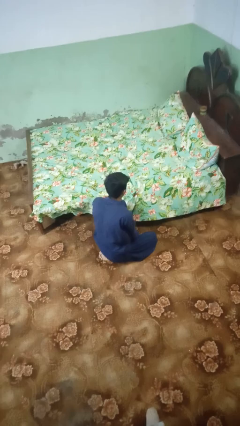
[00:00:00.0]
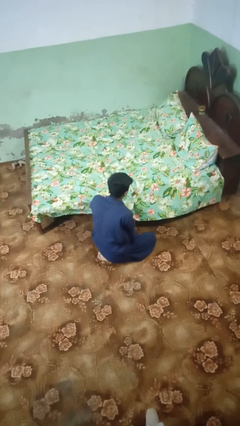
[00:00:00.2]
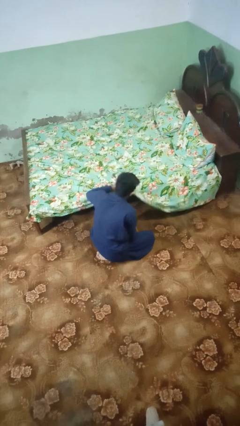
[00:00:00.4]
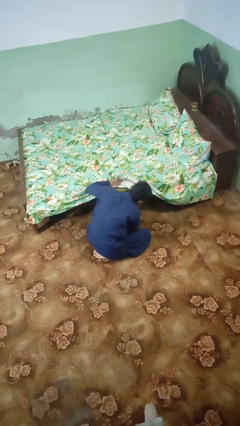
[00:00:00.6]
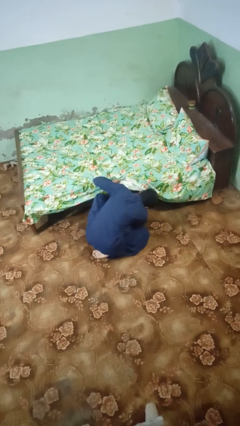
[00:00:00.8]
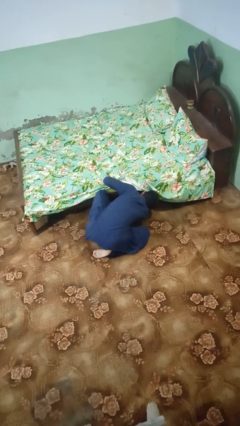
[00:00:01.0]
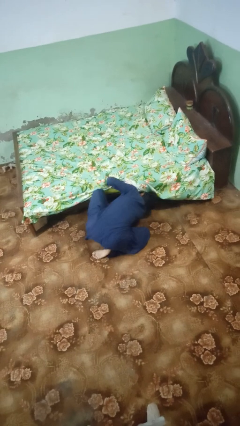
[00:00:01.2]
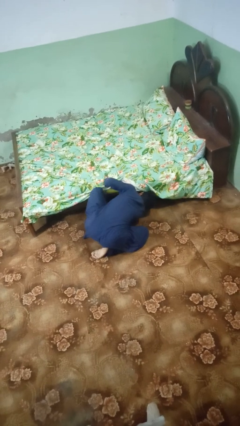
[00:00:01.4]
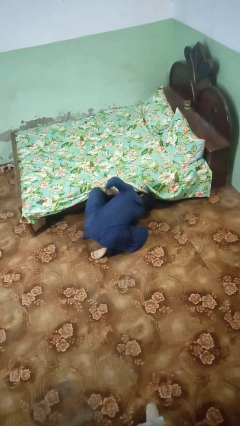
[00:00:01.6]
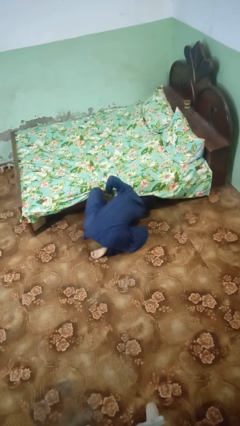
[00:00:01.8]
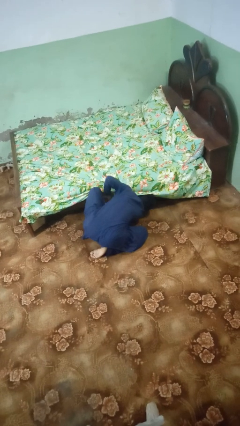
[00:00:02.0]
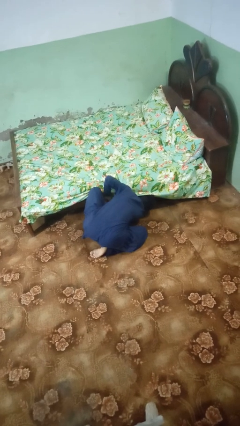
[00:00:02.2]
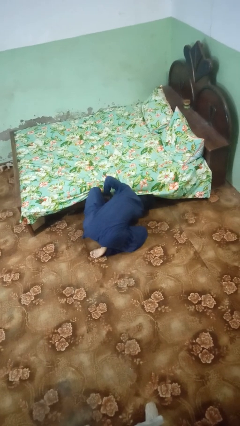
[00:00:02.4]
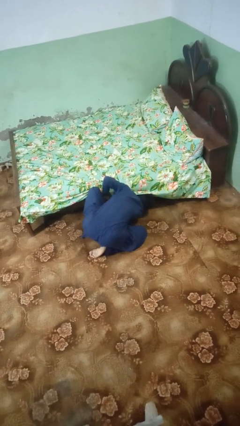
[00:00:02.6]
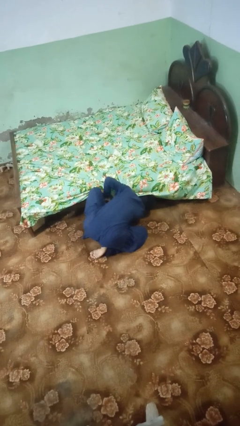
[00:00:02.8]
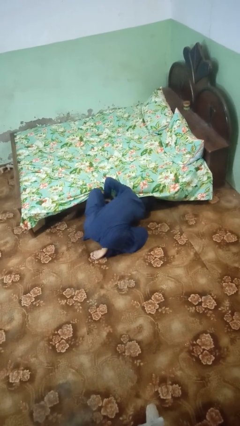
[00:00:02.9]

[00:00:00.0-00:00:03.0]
person searches under bed

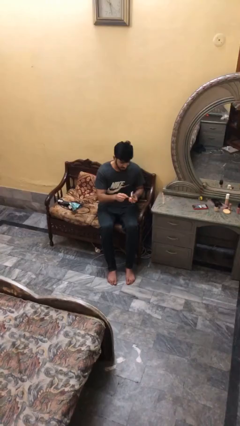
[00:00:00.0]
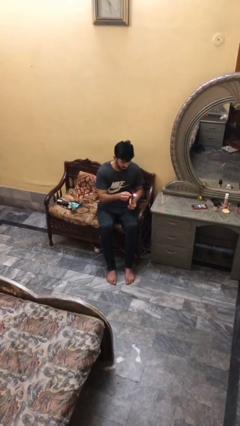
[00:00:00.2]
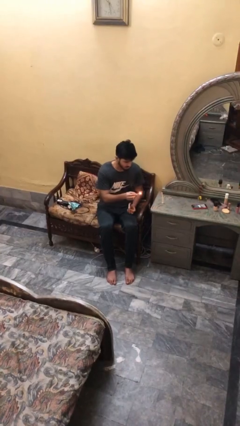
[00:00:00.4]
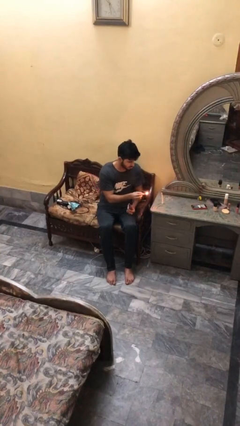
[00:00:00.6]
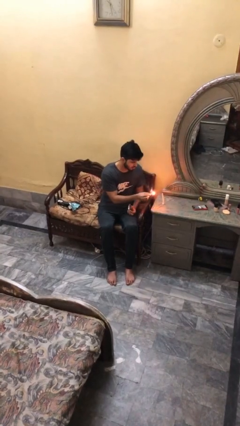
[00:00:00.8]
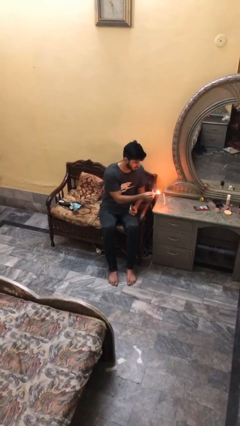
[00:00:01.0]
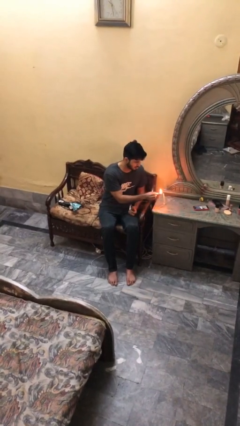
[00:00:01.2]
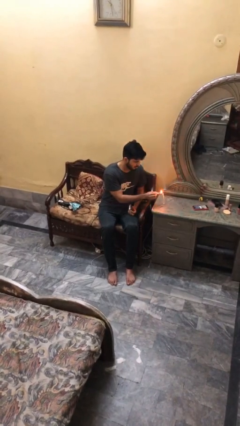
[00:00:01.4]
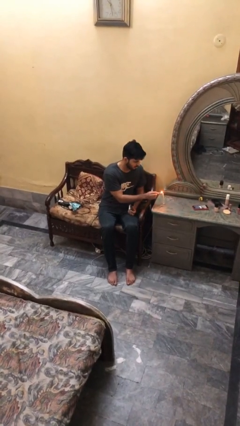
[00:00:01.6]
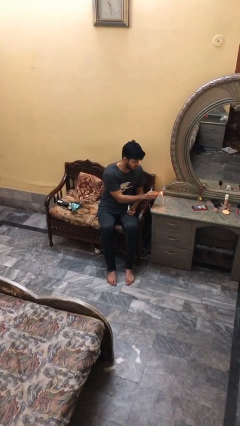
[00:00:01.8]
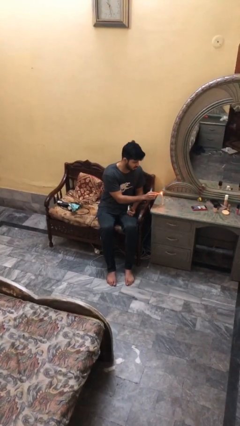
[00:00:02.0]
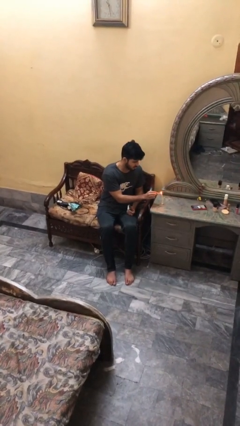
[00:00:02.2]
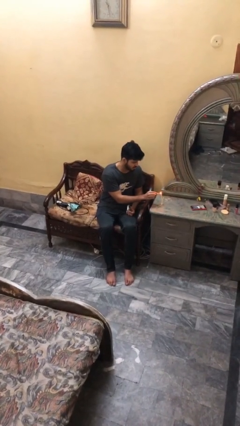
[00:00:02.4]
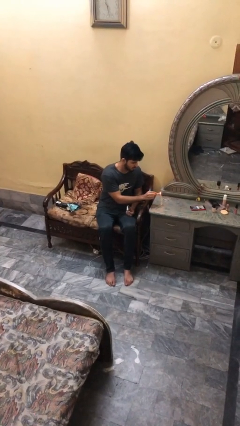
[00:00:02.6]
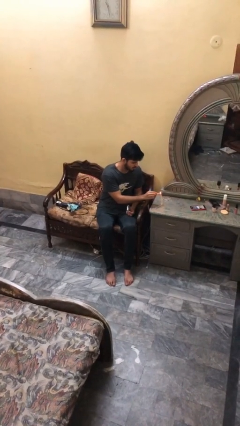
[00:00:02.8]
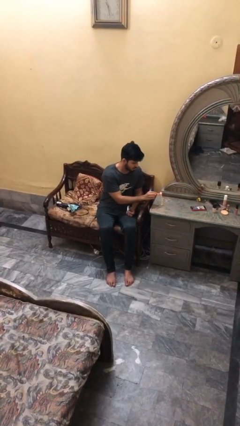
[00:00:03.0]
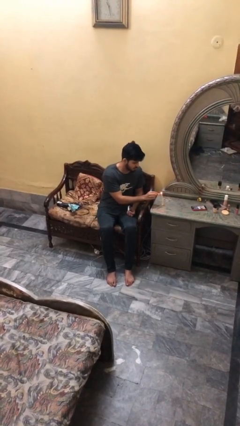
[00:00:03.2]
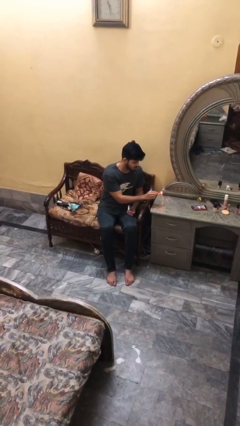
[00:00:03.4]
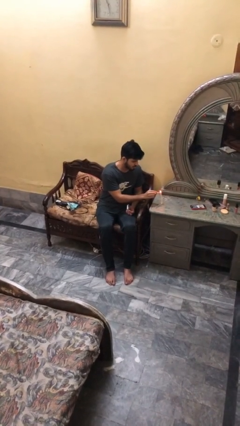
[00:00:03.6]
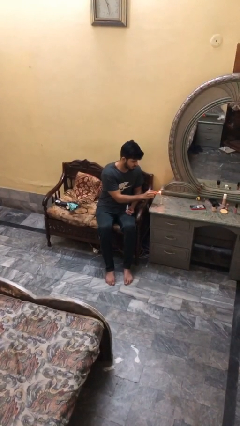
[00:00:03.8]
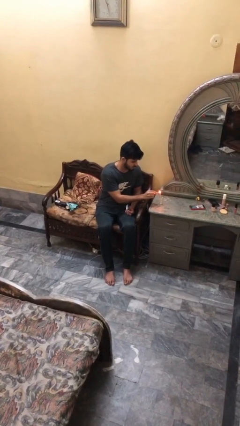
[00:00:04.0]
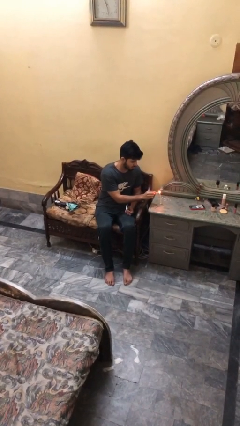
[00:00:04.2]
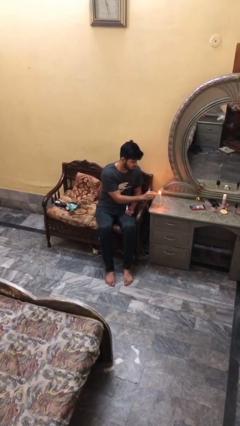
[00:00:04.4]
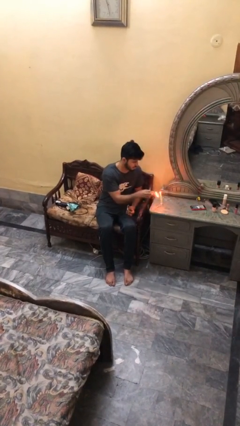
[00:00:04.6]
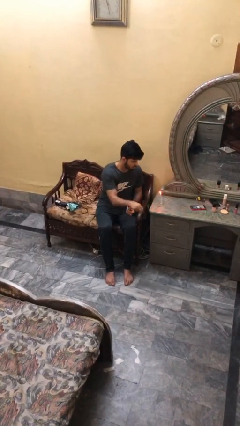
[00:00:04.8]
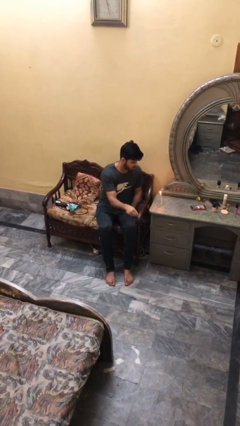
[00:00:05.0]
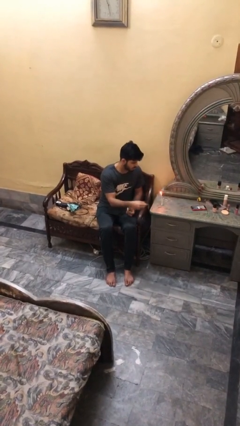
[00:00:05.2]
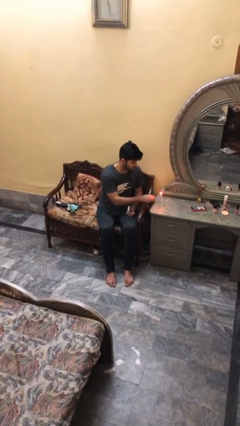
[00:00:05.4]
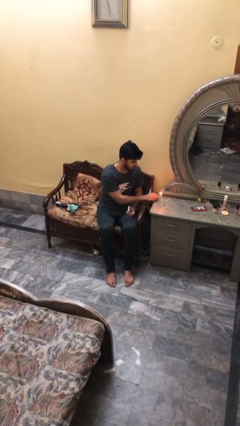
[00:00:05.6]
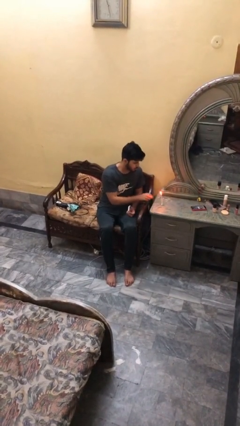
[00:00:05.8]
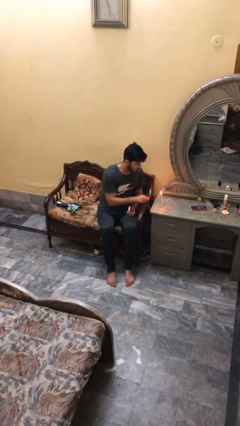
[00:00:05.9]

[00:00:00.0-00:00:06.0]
person lights candle

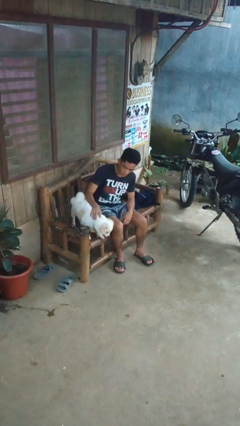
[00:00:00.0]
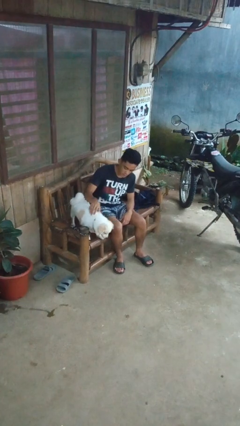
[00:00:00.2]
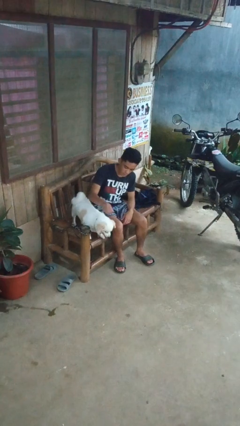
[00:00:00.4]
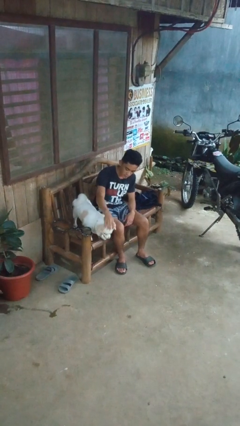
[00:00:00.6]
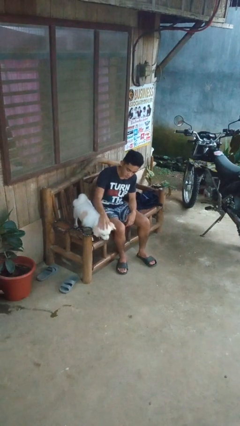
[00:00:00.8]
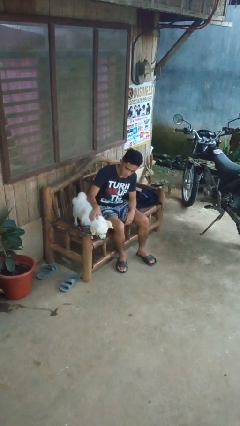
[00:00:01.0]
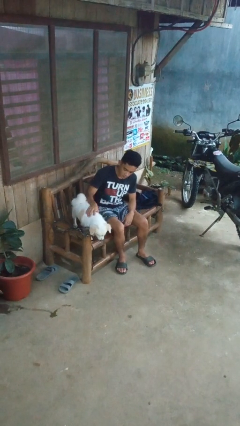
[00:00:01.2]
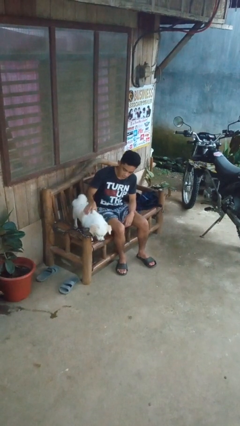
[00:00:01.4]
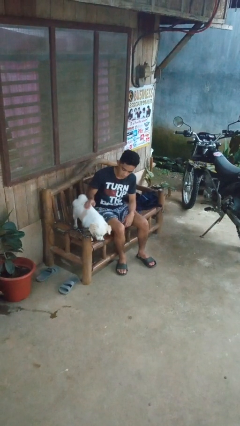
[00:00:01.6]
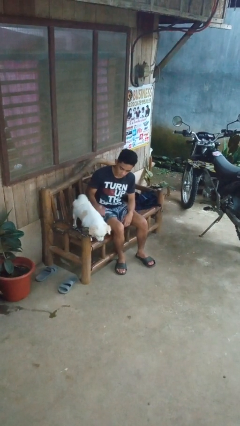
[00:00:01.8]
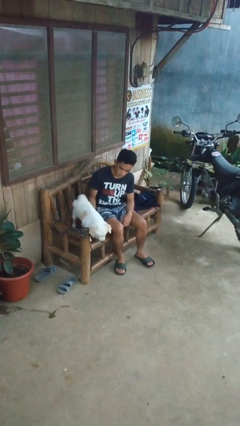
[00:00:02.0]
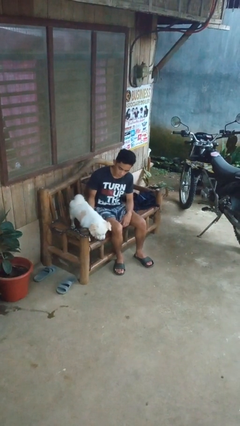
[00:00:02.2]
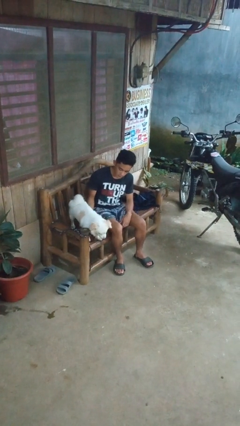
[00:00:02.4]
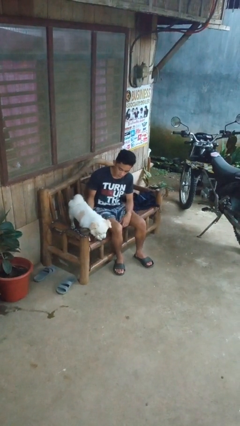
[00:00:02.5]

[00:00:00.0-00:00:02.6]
person pets dog

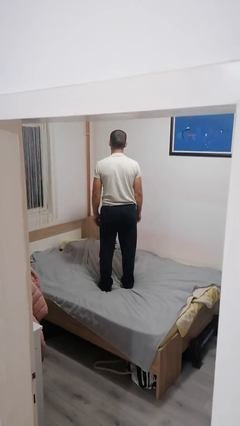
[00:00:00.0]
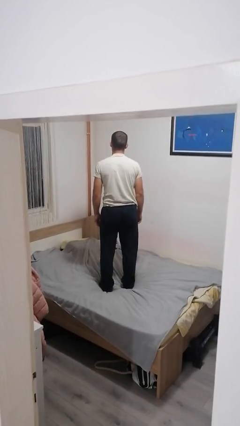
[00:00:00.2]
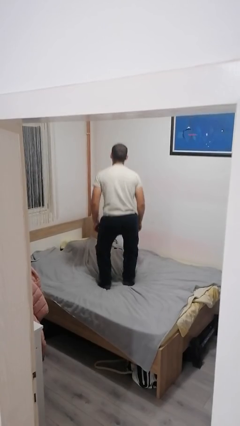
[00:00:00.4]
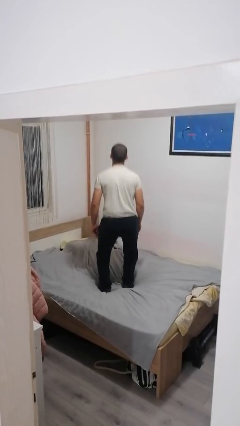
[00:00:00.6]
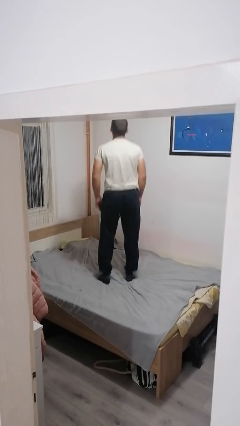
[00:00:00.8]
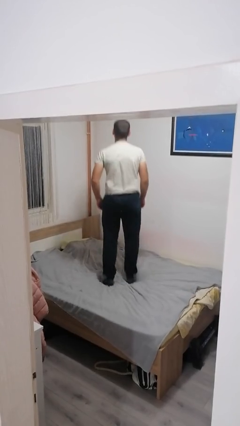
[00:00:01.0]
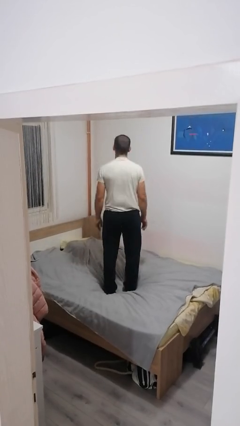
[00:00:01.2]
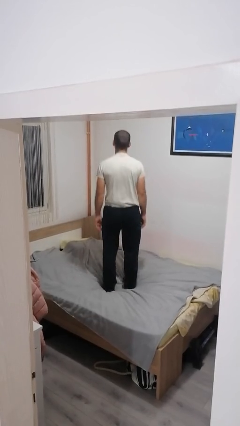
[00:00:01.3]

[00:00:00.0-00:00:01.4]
person jumps on bed

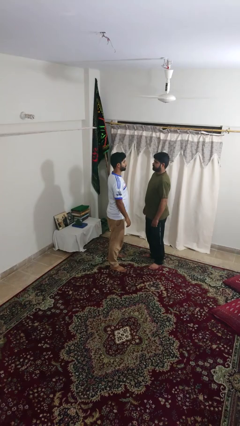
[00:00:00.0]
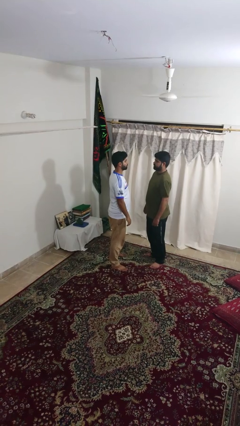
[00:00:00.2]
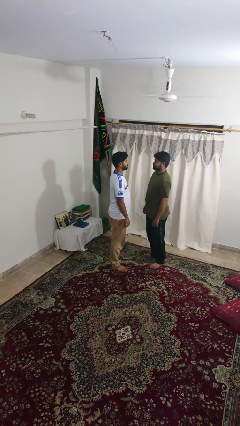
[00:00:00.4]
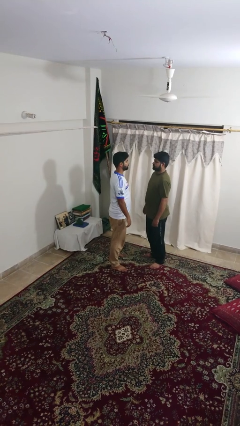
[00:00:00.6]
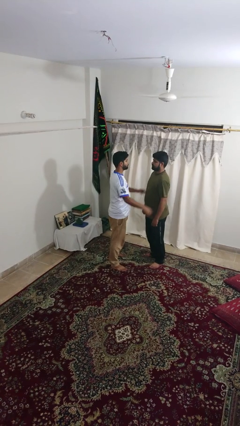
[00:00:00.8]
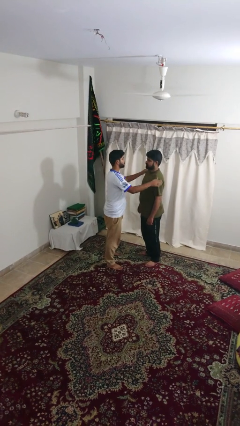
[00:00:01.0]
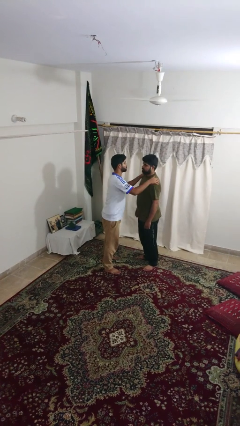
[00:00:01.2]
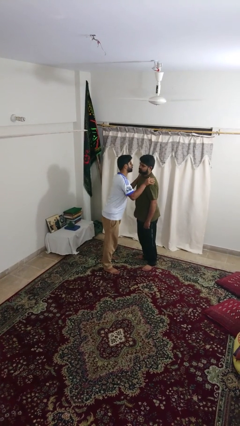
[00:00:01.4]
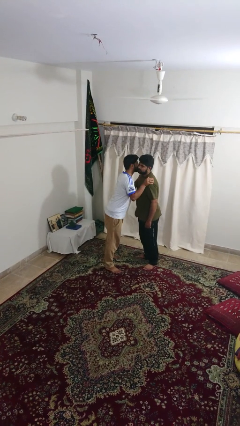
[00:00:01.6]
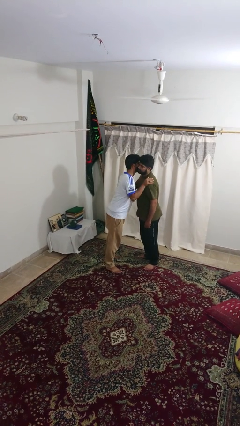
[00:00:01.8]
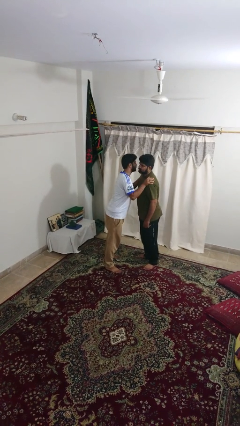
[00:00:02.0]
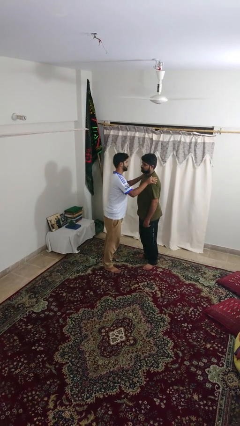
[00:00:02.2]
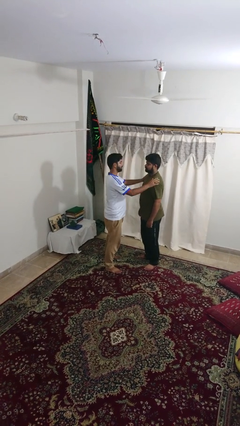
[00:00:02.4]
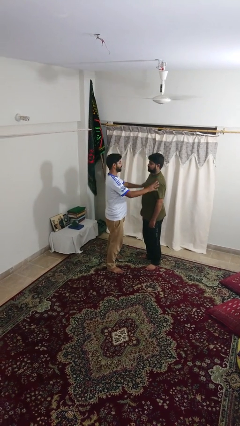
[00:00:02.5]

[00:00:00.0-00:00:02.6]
person kisses cheek of person

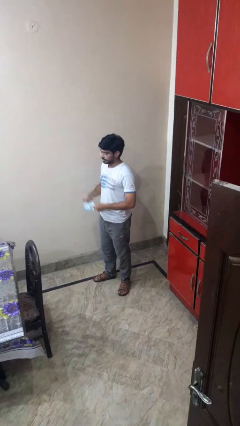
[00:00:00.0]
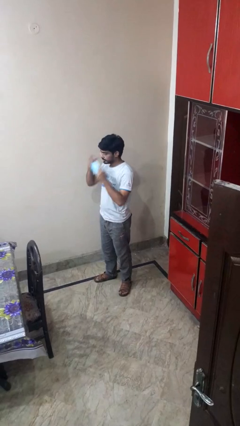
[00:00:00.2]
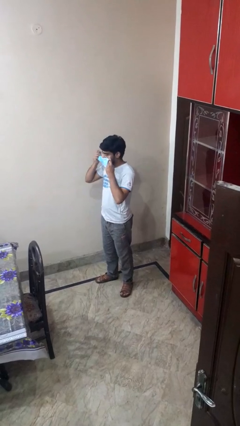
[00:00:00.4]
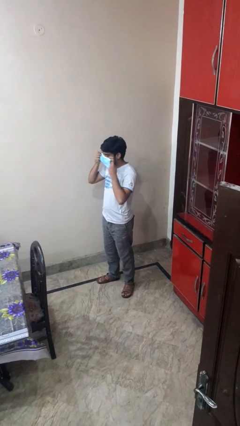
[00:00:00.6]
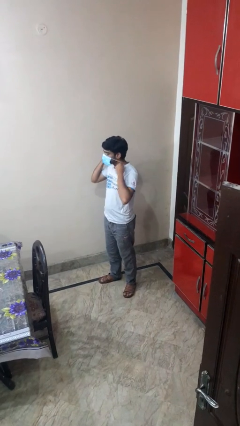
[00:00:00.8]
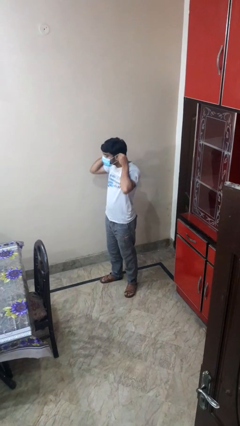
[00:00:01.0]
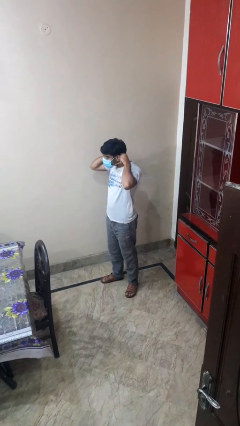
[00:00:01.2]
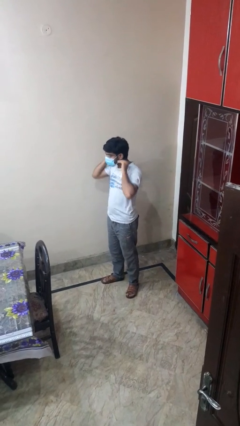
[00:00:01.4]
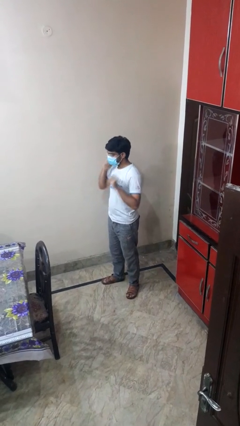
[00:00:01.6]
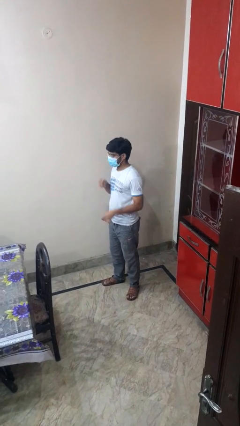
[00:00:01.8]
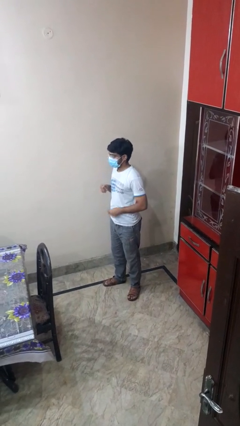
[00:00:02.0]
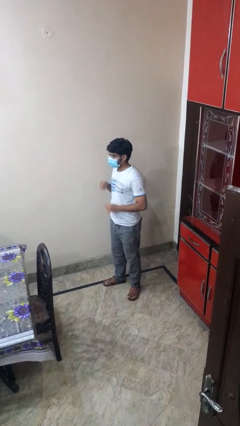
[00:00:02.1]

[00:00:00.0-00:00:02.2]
person puts on facemask
